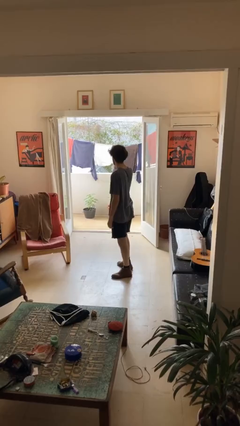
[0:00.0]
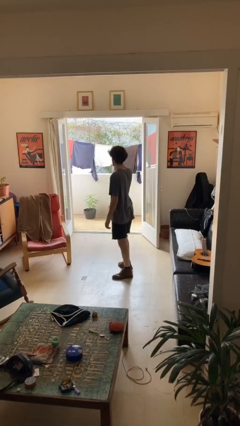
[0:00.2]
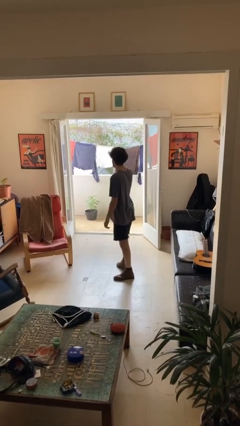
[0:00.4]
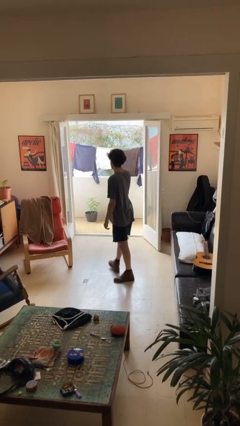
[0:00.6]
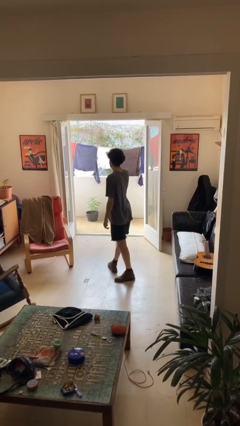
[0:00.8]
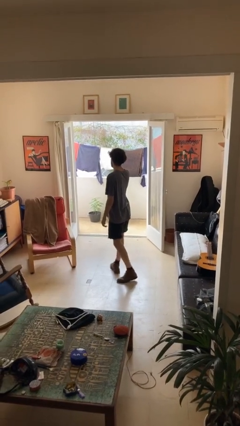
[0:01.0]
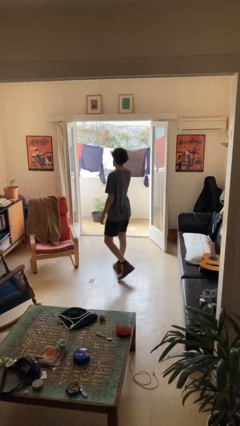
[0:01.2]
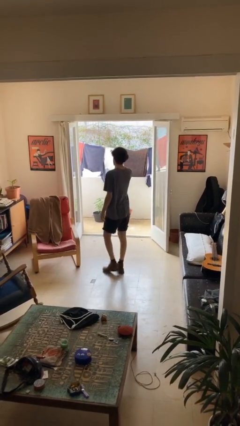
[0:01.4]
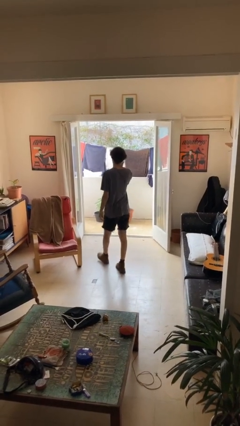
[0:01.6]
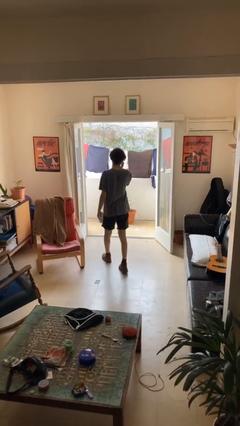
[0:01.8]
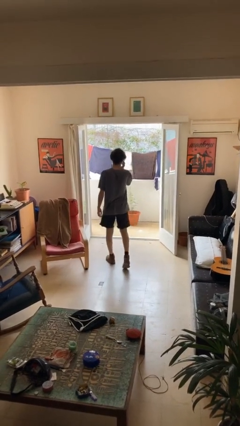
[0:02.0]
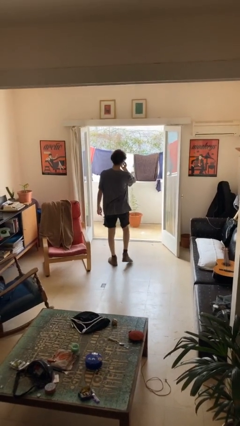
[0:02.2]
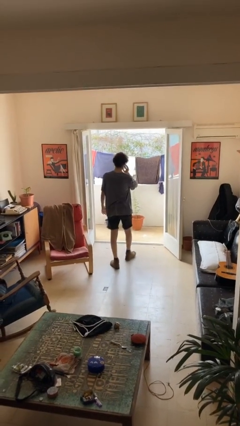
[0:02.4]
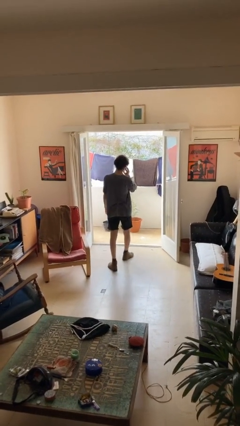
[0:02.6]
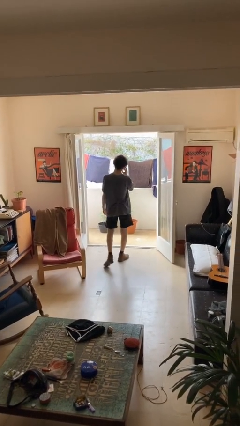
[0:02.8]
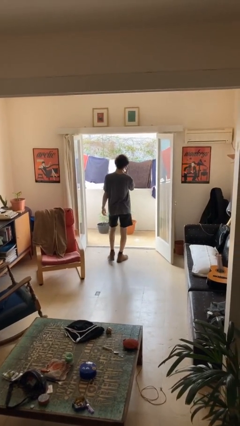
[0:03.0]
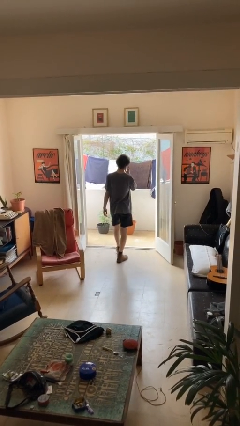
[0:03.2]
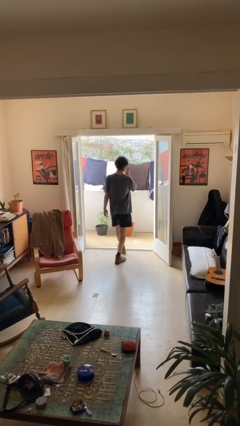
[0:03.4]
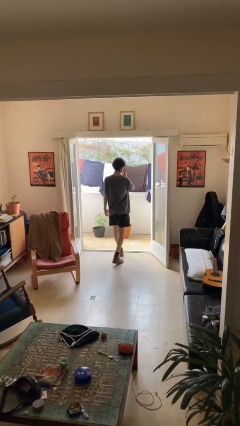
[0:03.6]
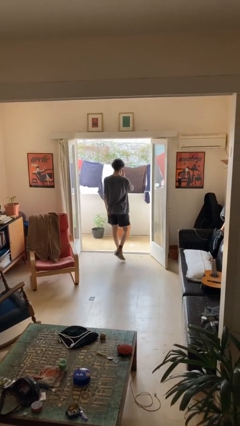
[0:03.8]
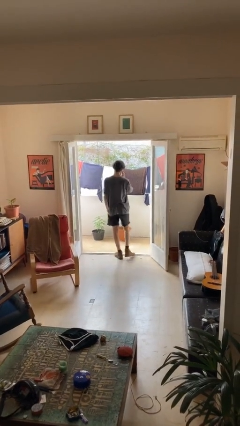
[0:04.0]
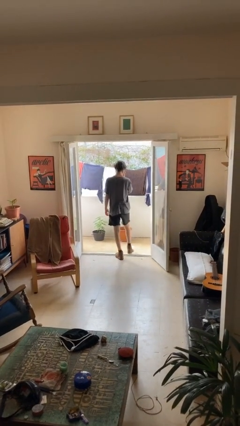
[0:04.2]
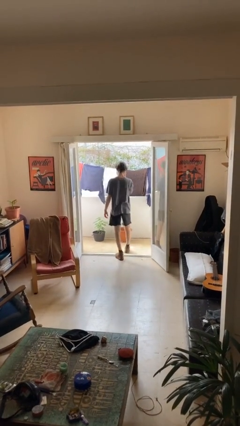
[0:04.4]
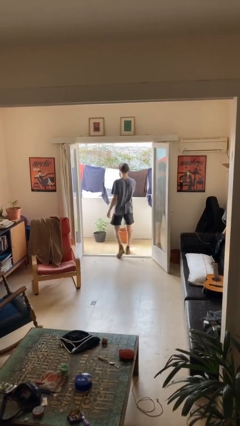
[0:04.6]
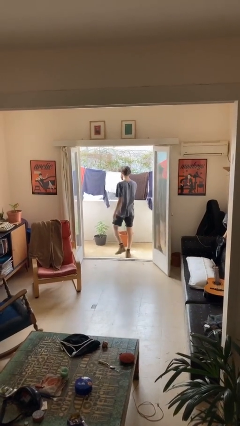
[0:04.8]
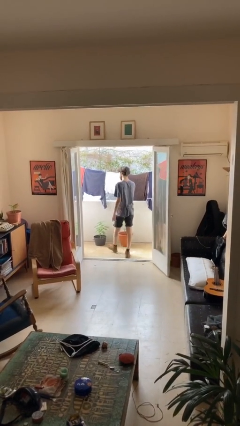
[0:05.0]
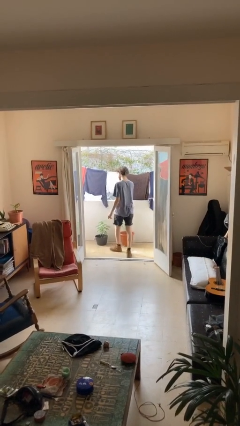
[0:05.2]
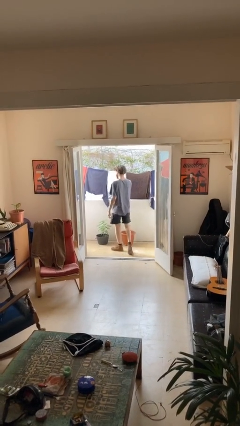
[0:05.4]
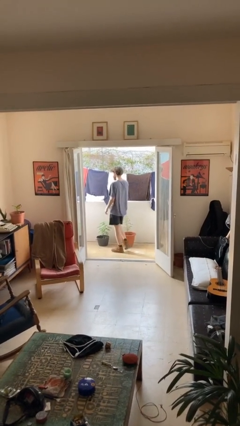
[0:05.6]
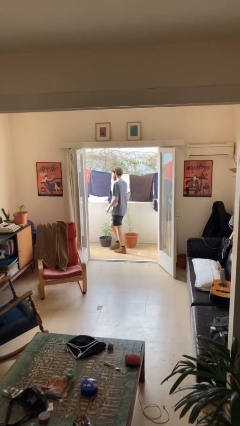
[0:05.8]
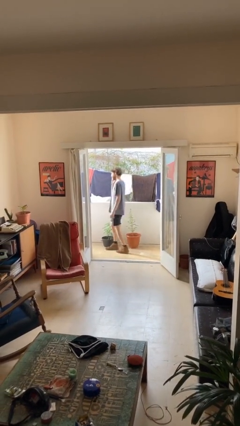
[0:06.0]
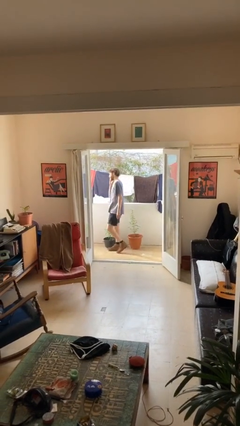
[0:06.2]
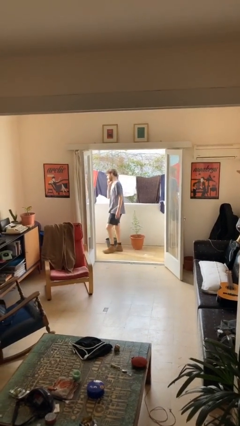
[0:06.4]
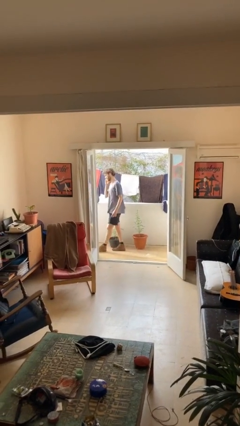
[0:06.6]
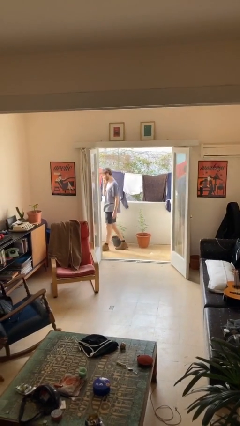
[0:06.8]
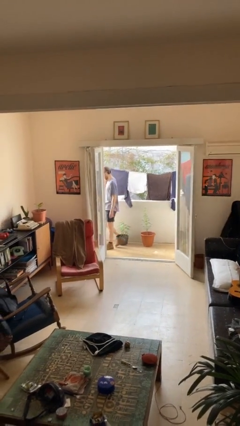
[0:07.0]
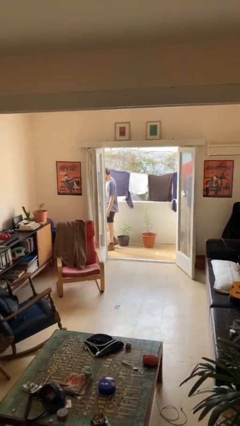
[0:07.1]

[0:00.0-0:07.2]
person exits scene through structure

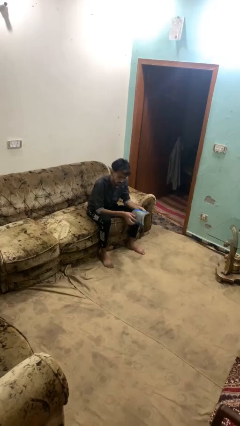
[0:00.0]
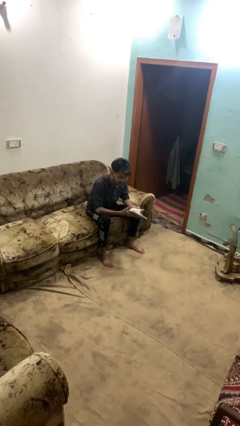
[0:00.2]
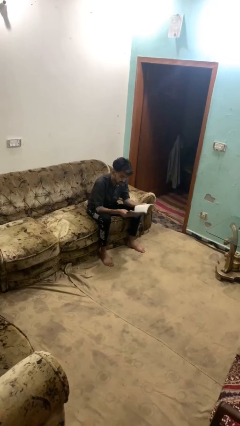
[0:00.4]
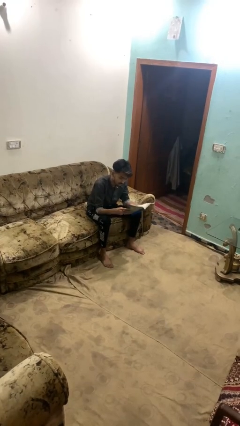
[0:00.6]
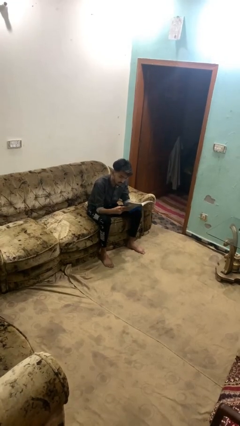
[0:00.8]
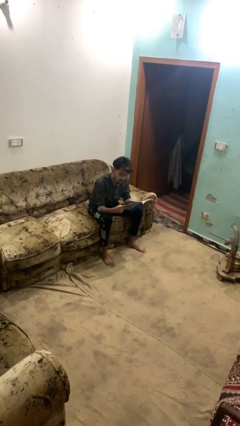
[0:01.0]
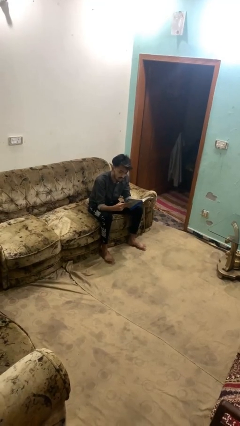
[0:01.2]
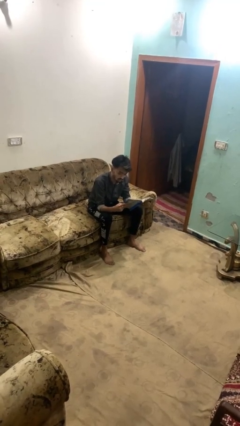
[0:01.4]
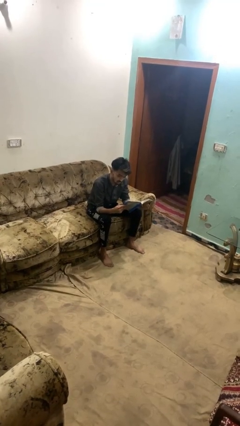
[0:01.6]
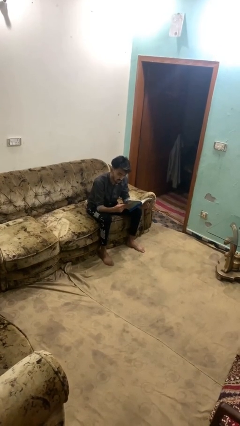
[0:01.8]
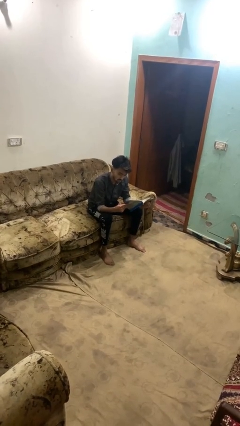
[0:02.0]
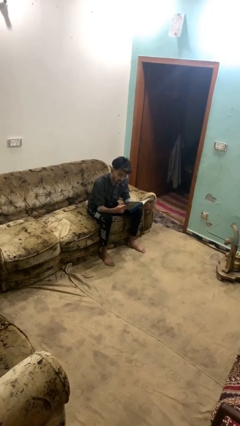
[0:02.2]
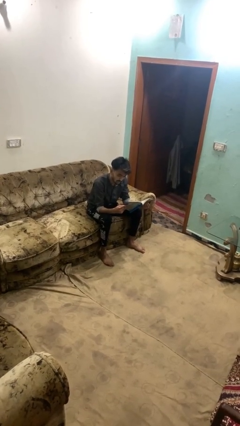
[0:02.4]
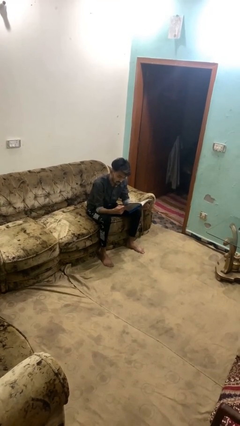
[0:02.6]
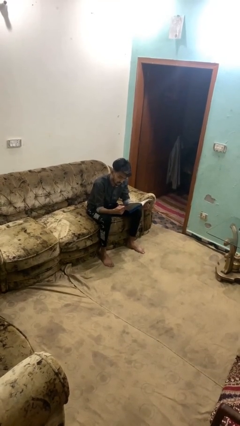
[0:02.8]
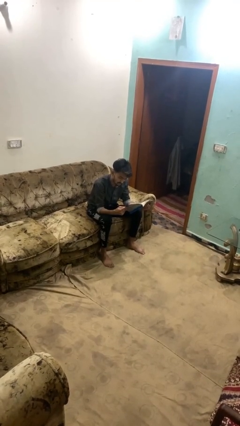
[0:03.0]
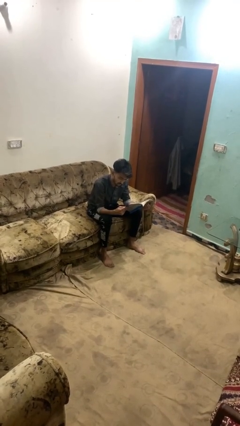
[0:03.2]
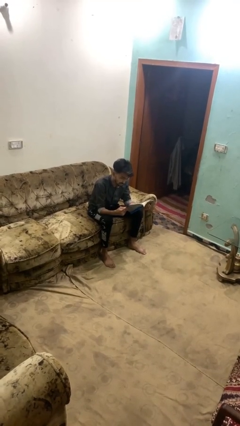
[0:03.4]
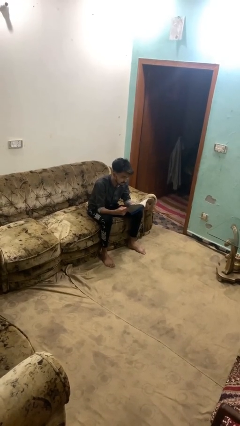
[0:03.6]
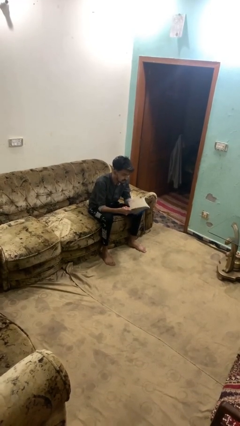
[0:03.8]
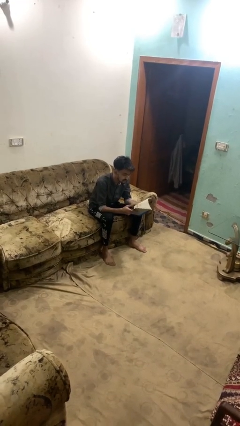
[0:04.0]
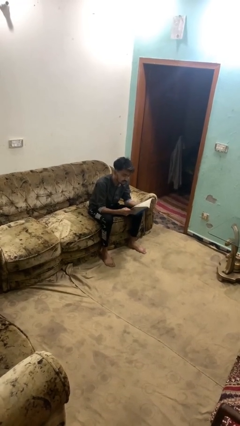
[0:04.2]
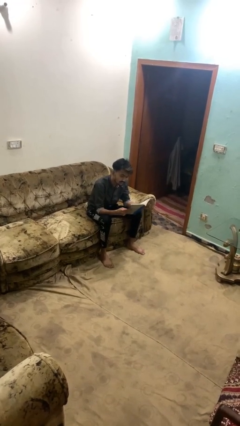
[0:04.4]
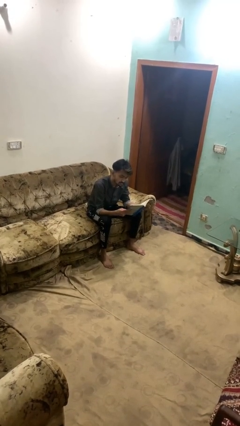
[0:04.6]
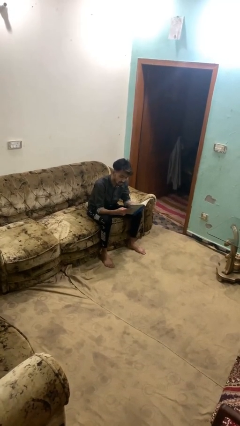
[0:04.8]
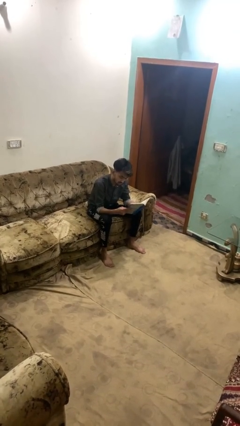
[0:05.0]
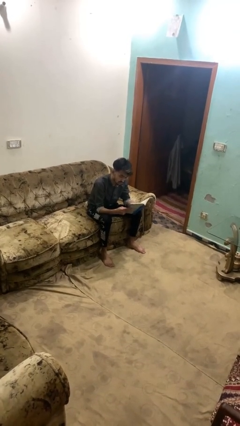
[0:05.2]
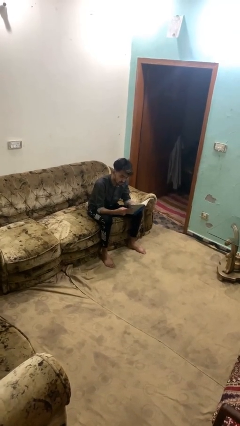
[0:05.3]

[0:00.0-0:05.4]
person reads book

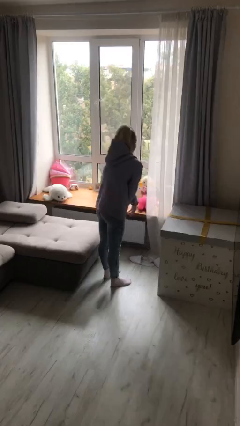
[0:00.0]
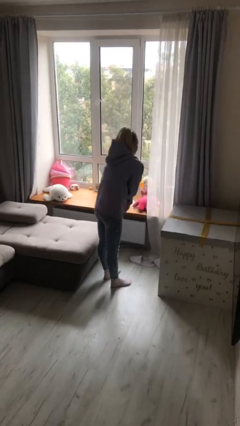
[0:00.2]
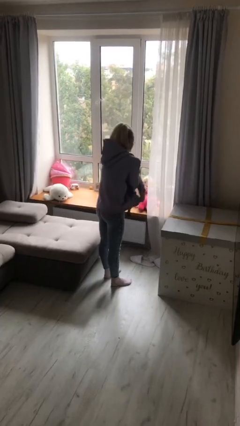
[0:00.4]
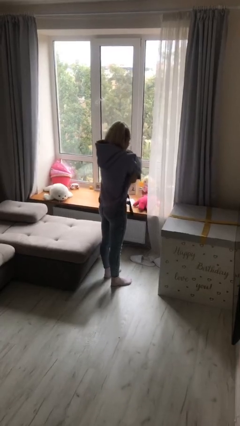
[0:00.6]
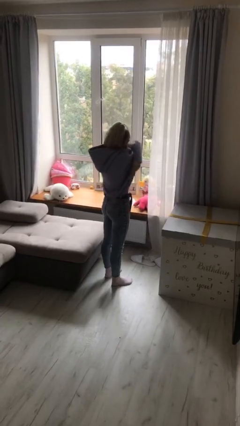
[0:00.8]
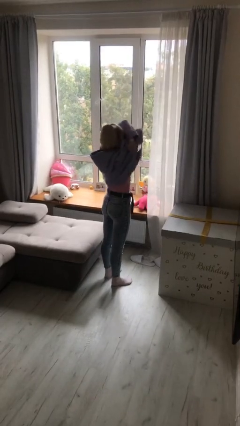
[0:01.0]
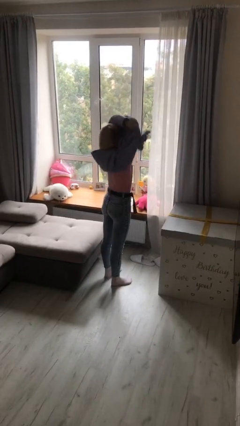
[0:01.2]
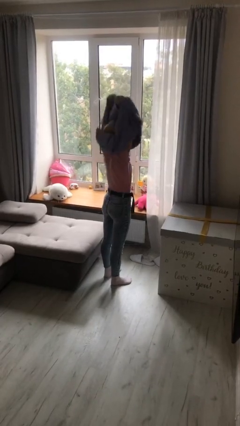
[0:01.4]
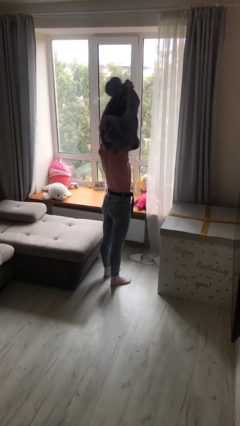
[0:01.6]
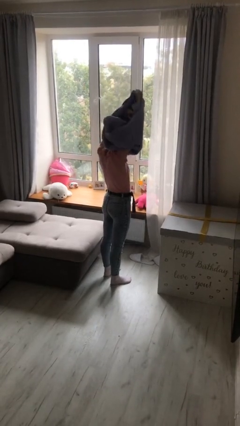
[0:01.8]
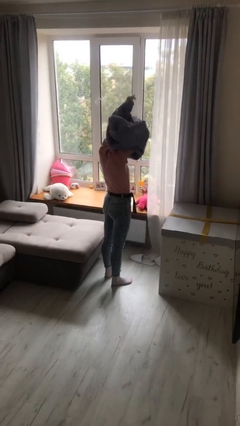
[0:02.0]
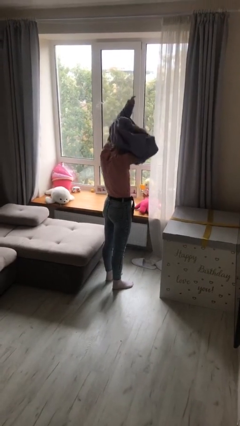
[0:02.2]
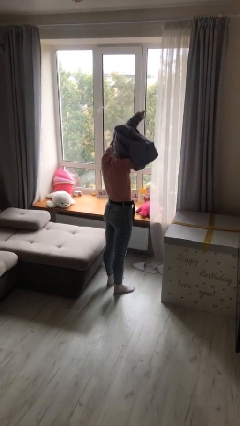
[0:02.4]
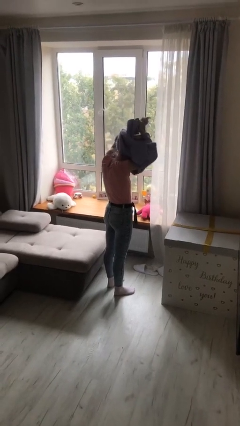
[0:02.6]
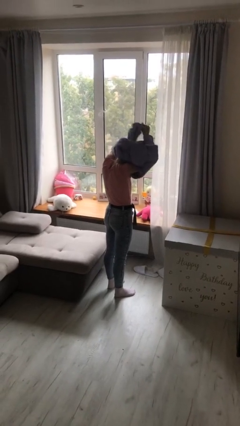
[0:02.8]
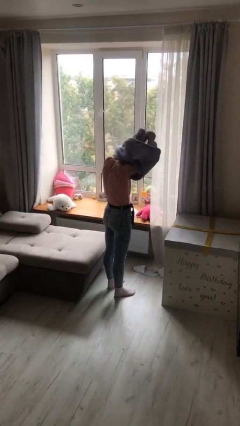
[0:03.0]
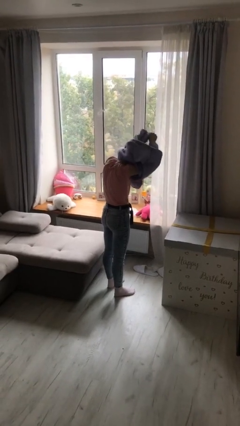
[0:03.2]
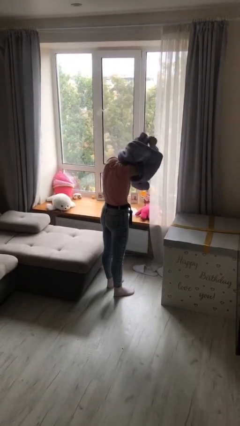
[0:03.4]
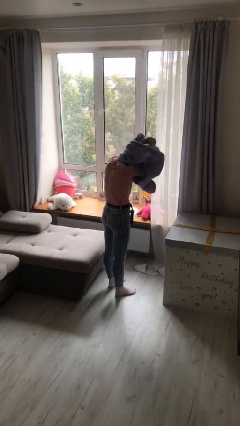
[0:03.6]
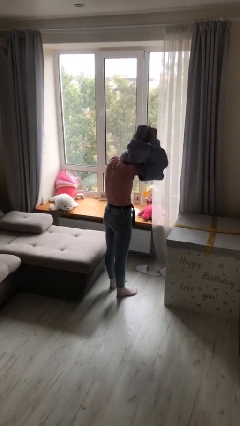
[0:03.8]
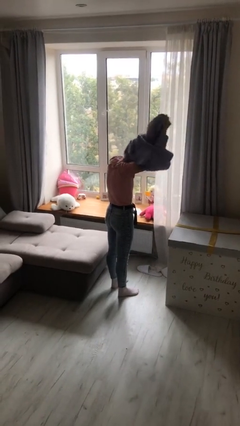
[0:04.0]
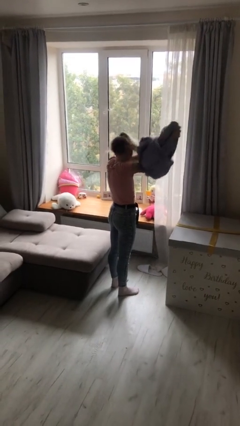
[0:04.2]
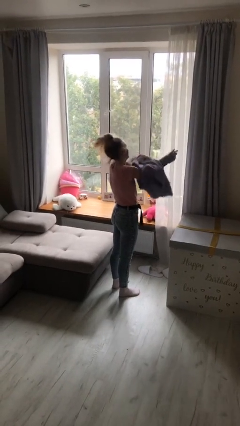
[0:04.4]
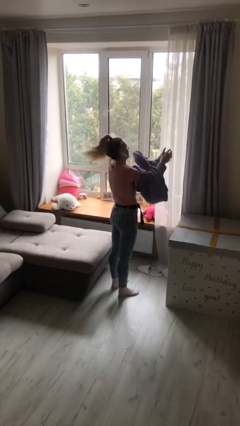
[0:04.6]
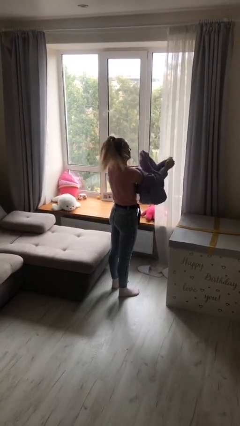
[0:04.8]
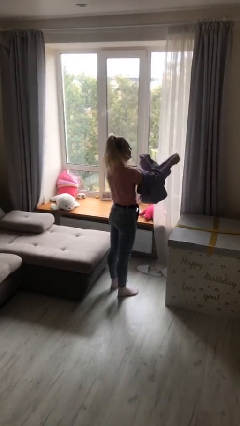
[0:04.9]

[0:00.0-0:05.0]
person takes off hoodie

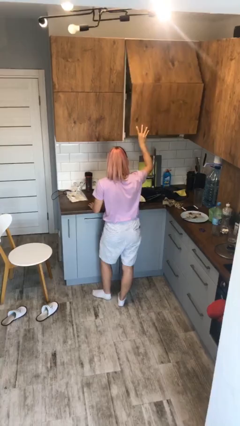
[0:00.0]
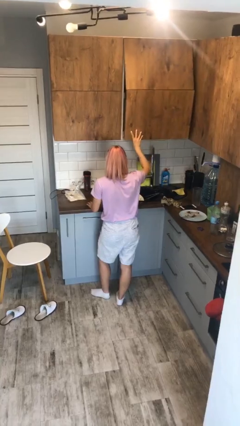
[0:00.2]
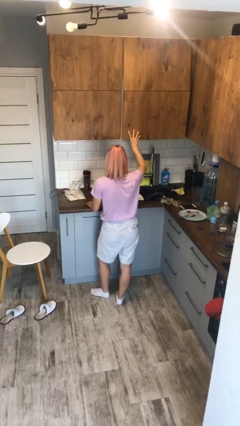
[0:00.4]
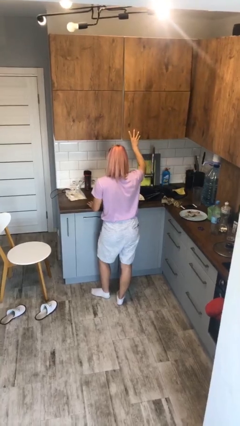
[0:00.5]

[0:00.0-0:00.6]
person closes cabinet
